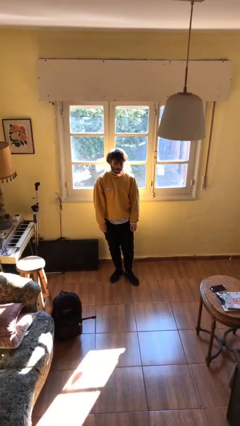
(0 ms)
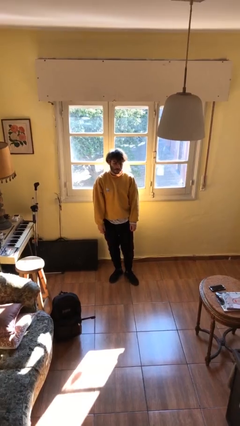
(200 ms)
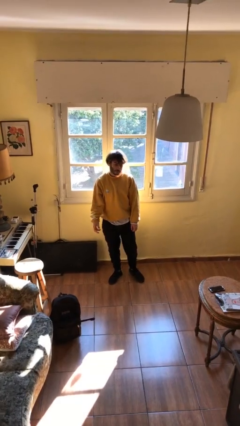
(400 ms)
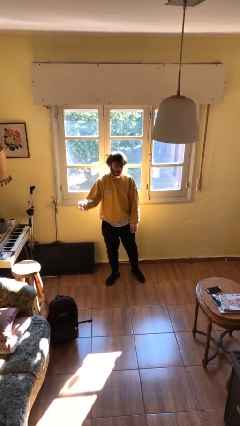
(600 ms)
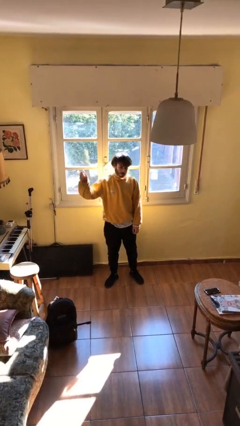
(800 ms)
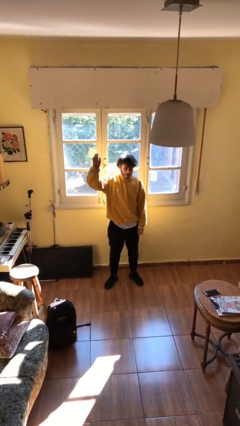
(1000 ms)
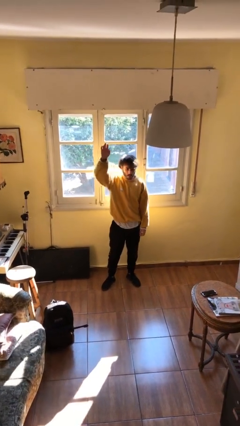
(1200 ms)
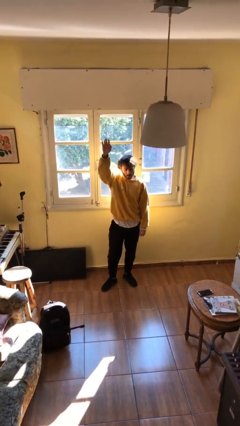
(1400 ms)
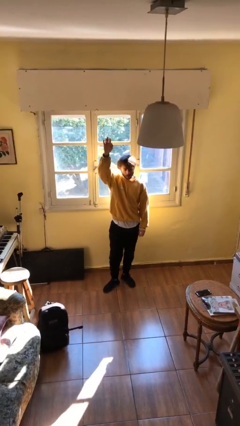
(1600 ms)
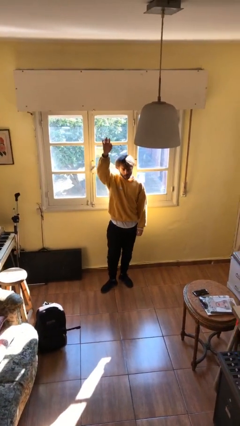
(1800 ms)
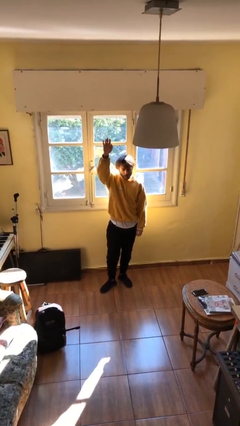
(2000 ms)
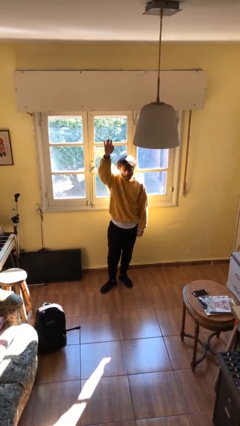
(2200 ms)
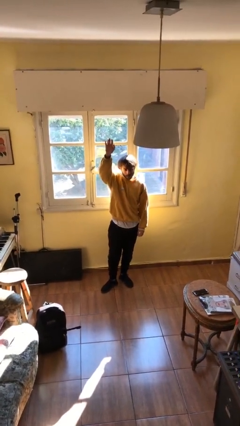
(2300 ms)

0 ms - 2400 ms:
person gestures raise hand

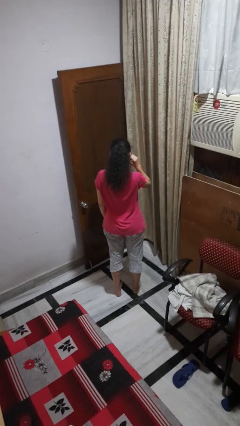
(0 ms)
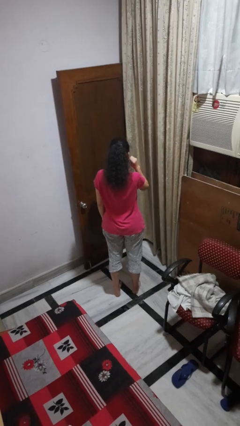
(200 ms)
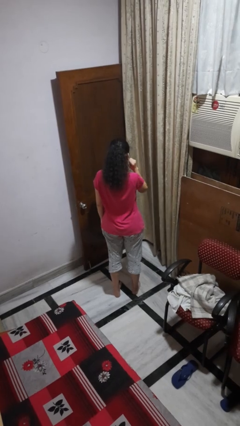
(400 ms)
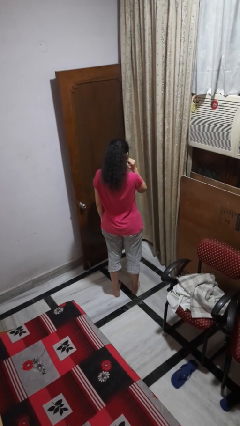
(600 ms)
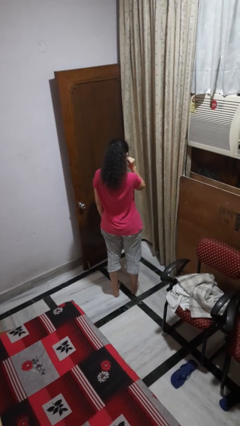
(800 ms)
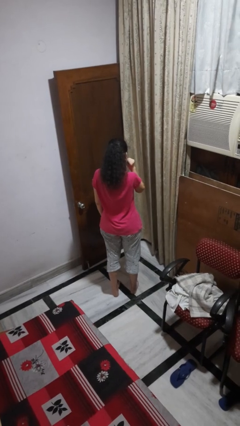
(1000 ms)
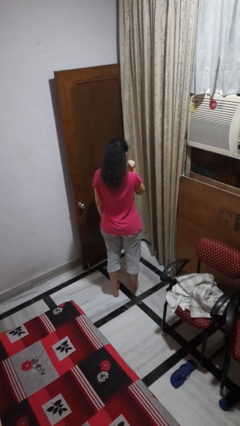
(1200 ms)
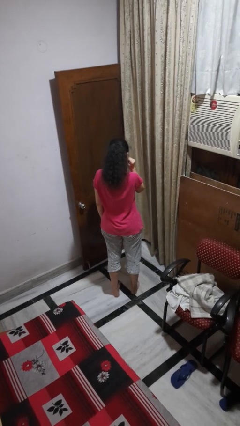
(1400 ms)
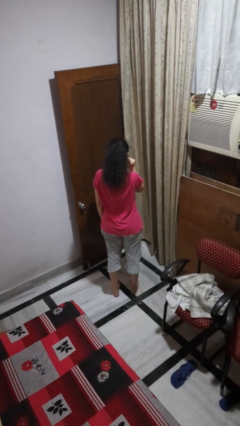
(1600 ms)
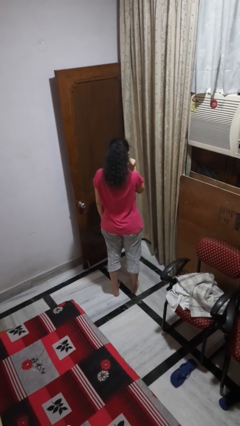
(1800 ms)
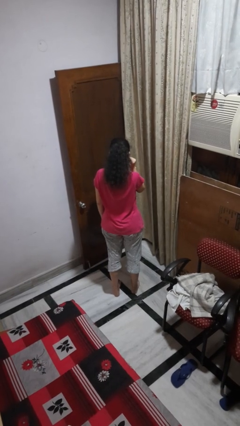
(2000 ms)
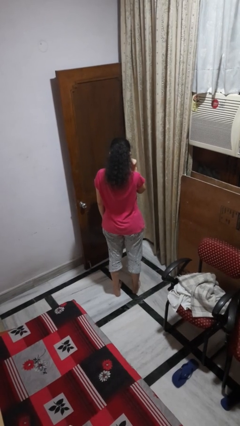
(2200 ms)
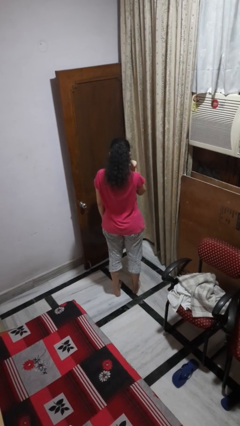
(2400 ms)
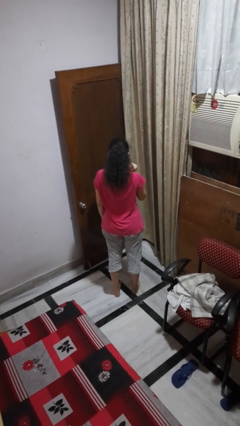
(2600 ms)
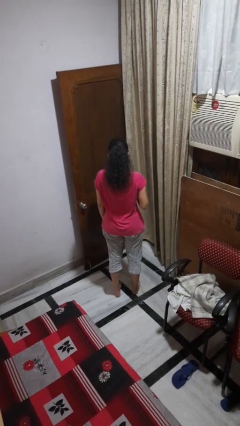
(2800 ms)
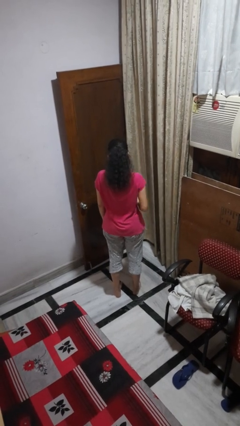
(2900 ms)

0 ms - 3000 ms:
person touches earlobe

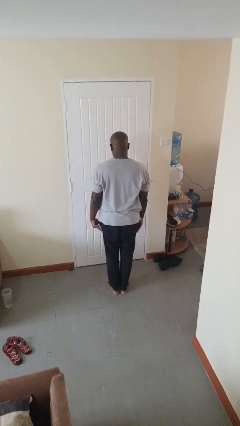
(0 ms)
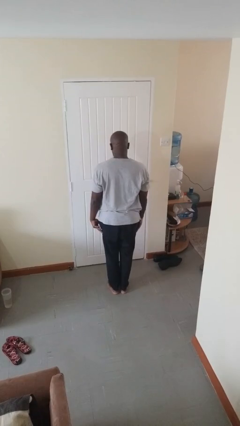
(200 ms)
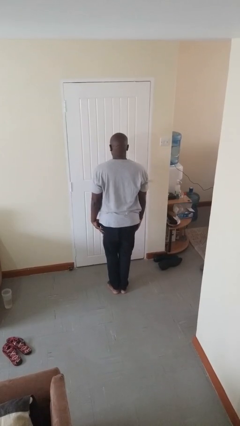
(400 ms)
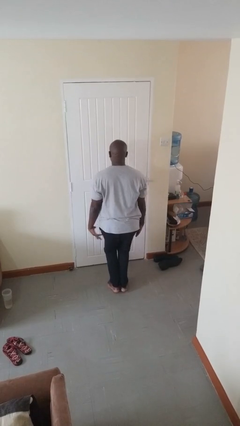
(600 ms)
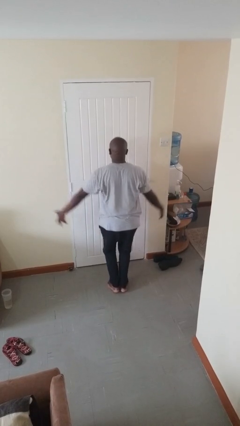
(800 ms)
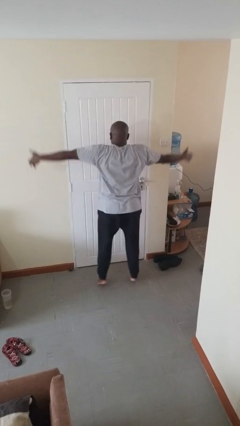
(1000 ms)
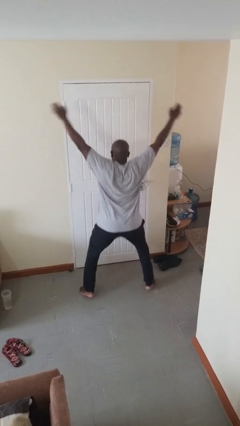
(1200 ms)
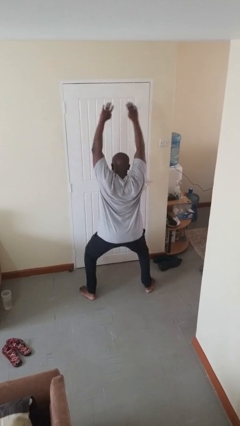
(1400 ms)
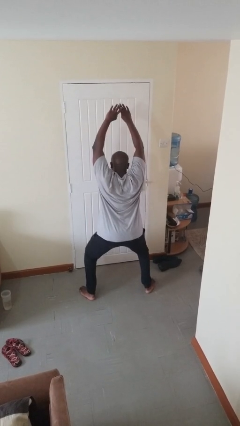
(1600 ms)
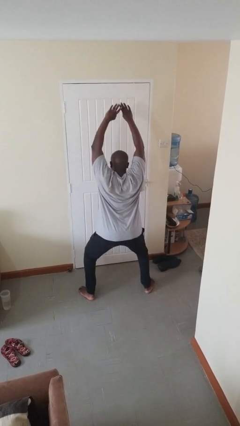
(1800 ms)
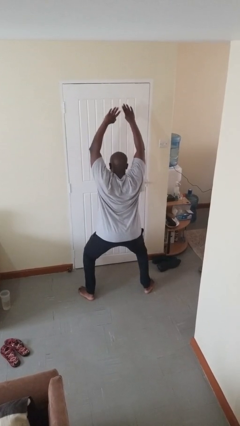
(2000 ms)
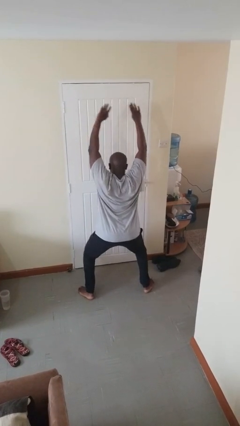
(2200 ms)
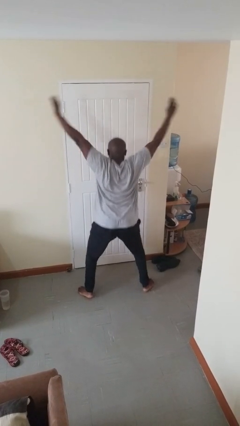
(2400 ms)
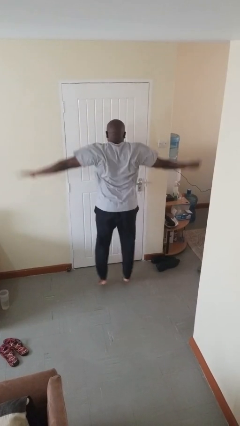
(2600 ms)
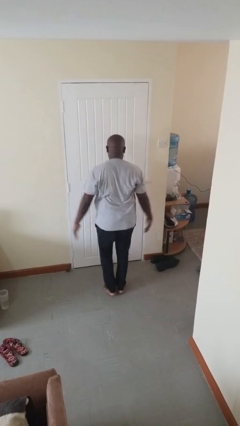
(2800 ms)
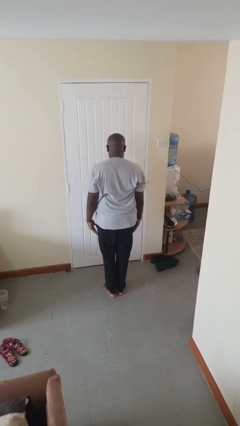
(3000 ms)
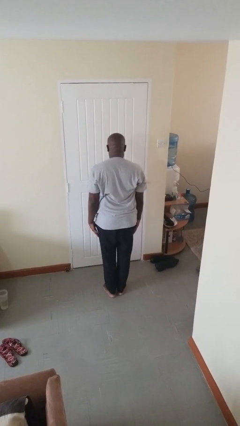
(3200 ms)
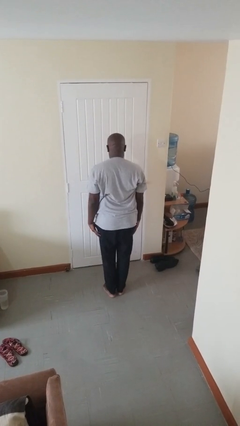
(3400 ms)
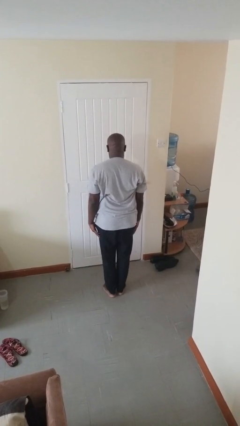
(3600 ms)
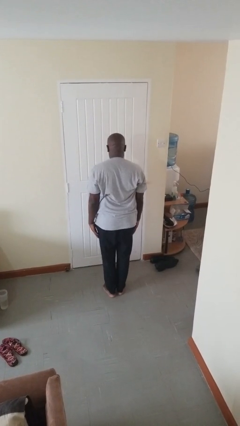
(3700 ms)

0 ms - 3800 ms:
person exercises with jumping jacks

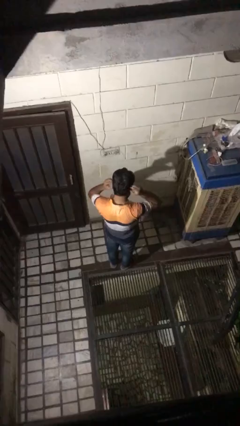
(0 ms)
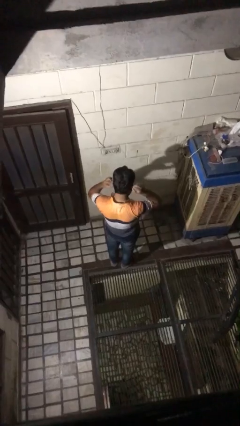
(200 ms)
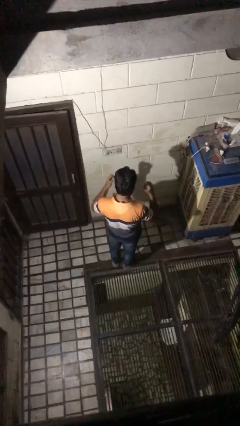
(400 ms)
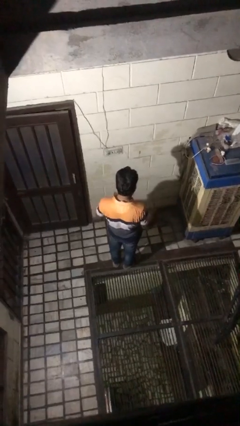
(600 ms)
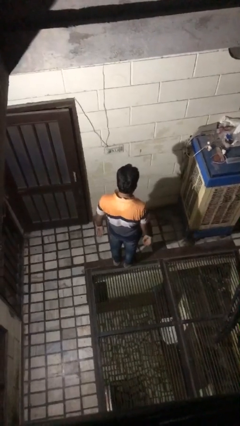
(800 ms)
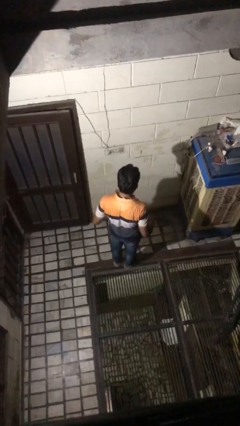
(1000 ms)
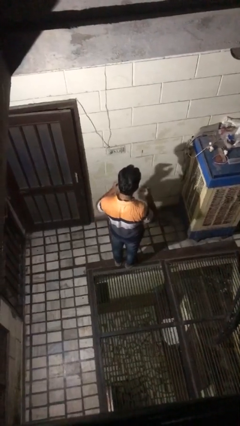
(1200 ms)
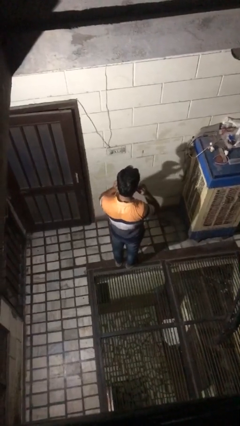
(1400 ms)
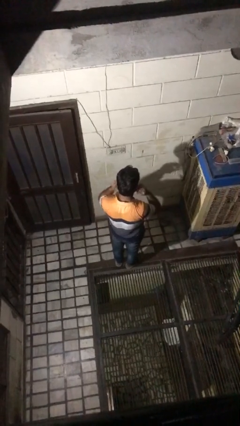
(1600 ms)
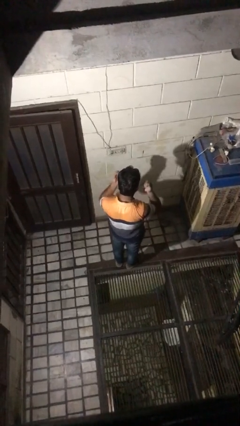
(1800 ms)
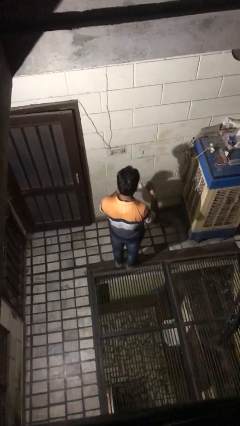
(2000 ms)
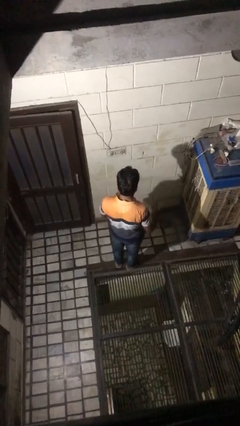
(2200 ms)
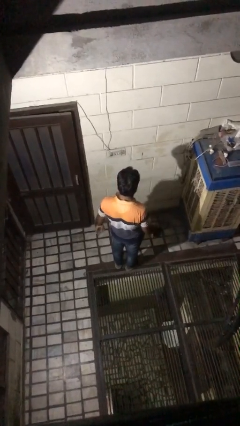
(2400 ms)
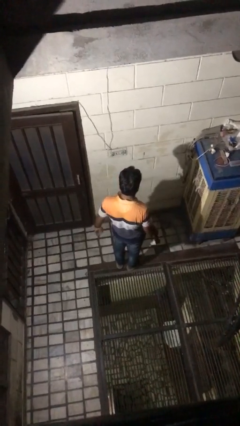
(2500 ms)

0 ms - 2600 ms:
person takes off facemask

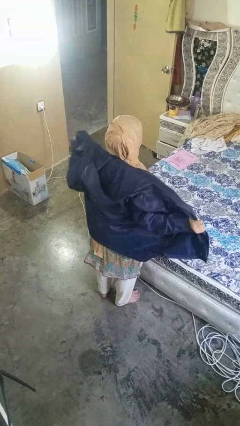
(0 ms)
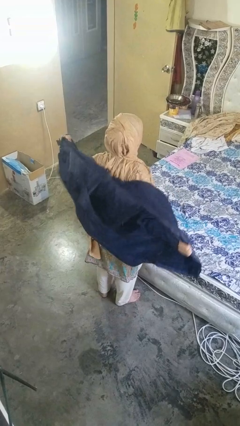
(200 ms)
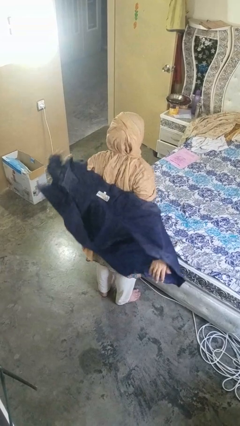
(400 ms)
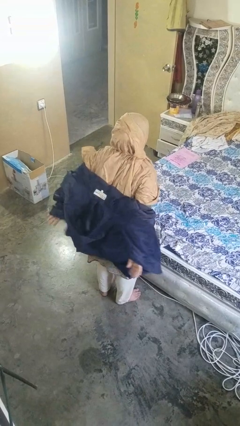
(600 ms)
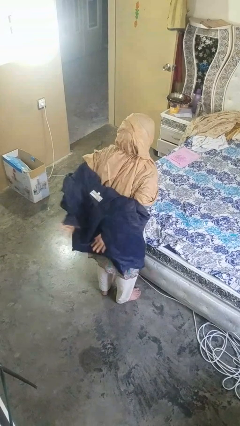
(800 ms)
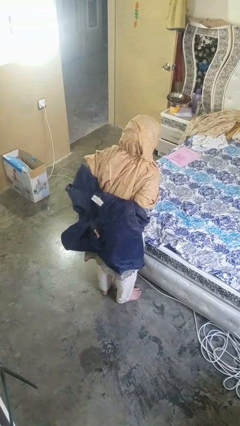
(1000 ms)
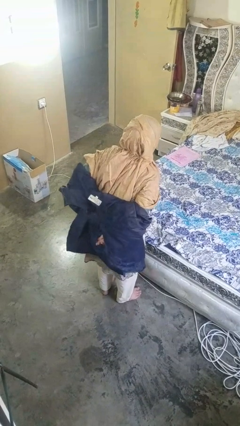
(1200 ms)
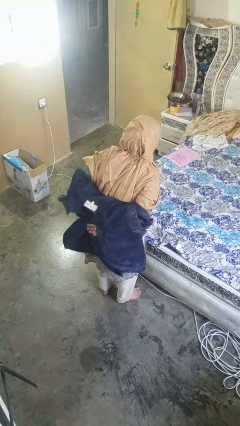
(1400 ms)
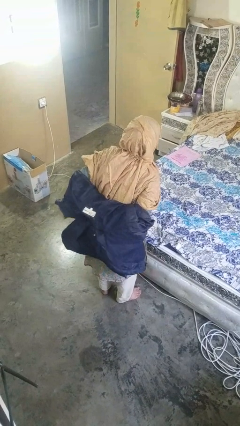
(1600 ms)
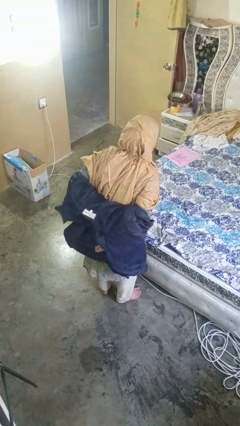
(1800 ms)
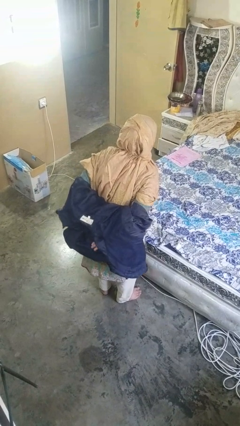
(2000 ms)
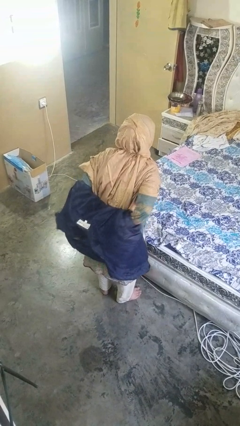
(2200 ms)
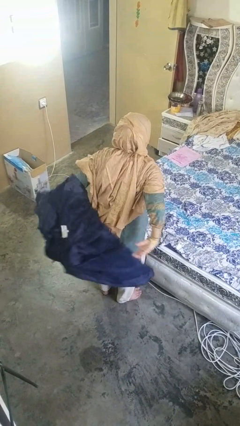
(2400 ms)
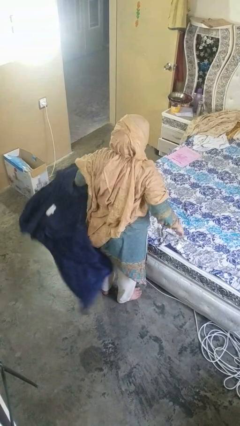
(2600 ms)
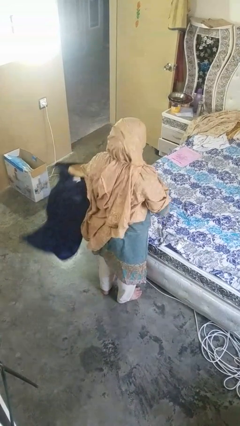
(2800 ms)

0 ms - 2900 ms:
person takes off jacket

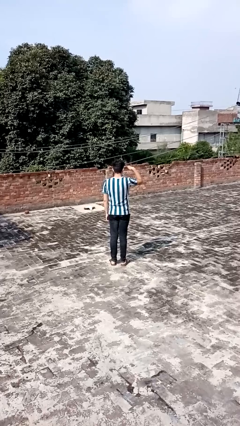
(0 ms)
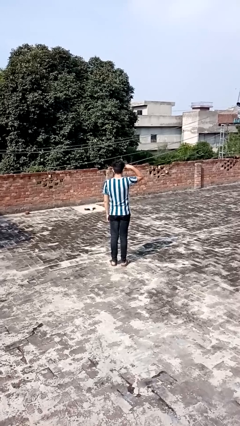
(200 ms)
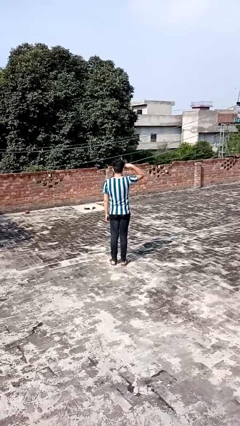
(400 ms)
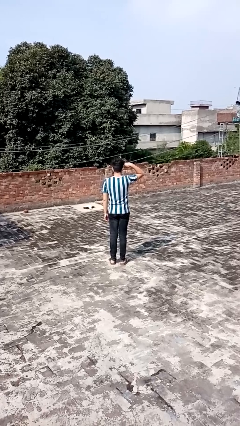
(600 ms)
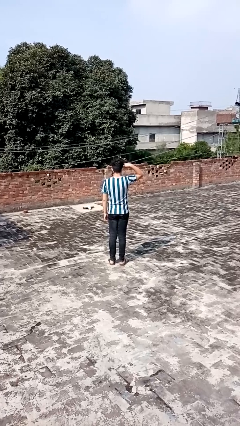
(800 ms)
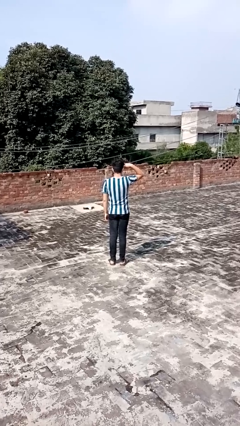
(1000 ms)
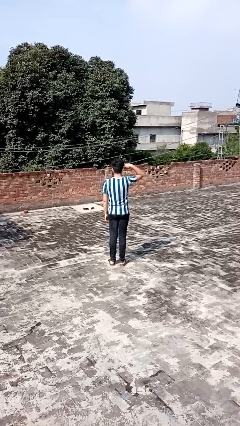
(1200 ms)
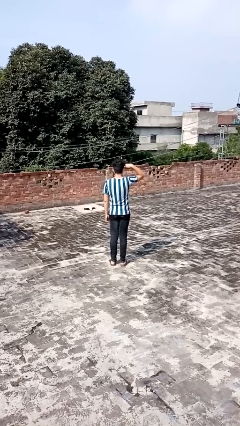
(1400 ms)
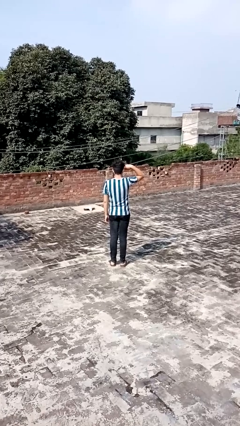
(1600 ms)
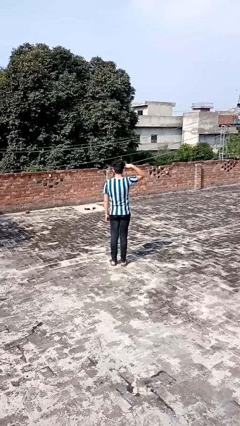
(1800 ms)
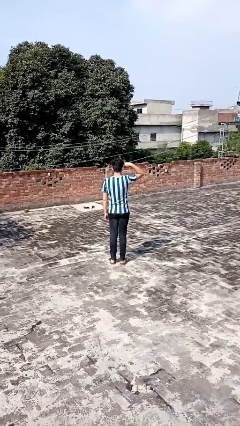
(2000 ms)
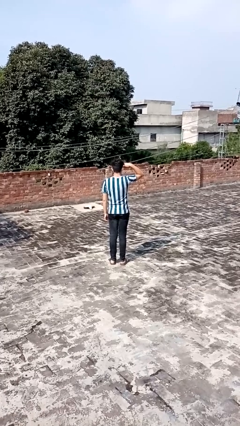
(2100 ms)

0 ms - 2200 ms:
person salutes

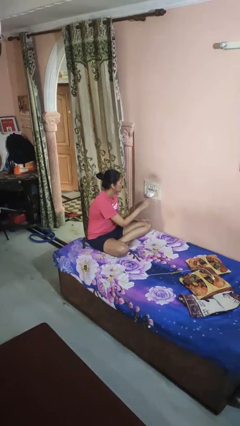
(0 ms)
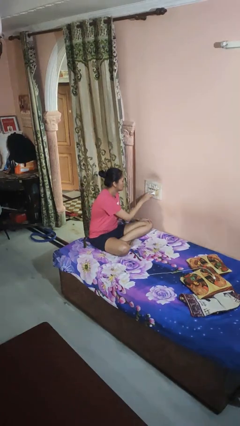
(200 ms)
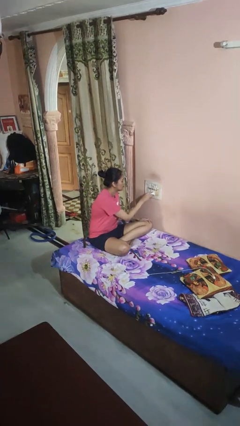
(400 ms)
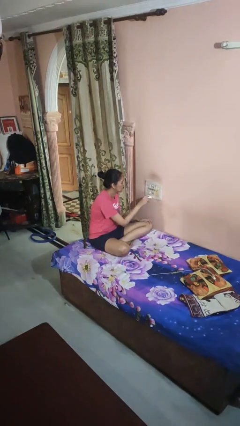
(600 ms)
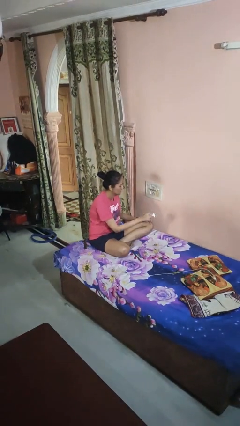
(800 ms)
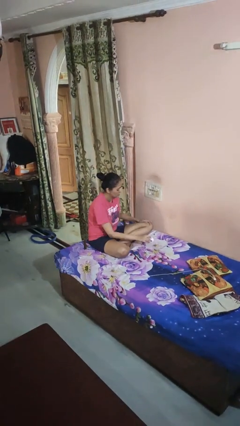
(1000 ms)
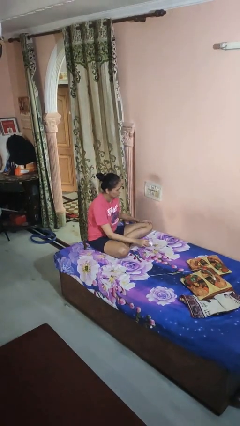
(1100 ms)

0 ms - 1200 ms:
person unplugs from electrical socket
